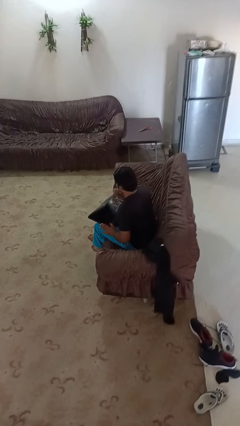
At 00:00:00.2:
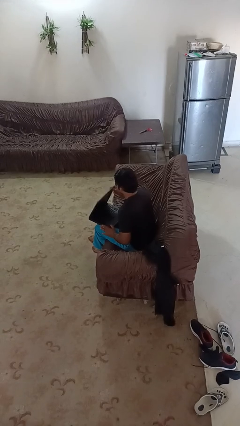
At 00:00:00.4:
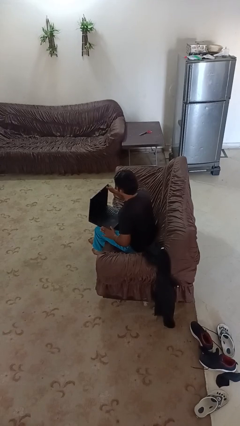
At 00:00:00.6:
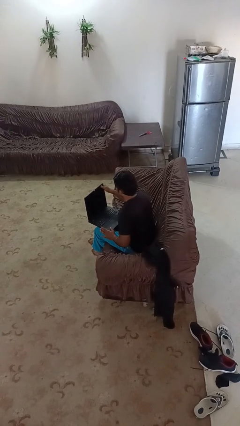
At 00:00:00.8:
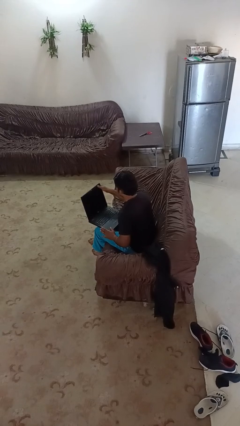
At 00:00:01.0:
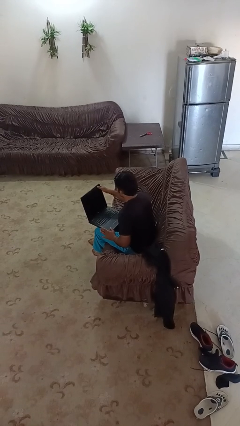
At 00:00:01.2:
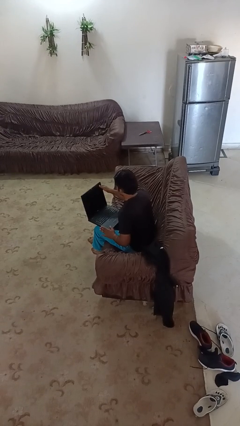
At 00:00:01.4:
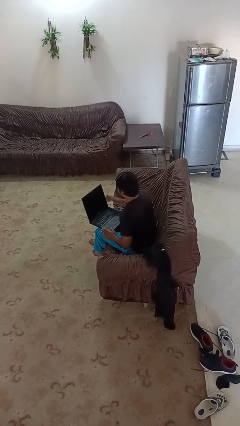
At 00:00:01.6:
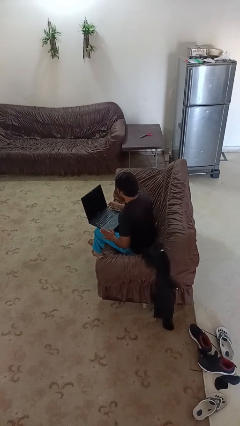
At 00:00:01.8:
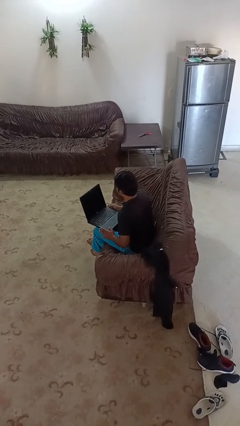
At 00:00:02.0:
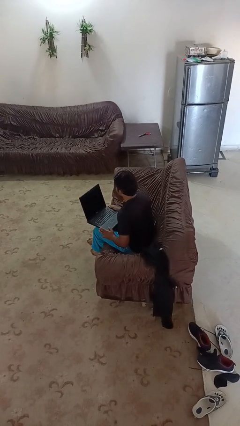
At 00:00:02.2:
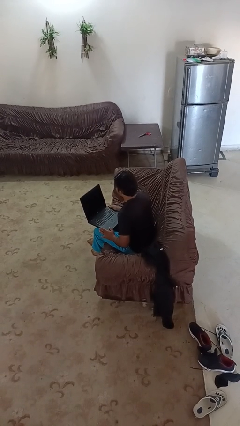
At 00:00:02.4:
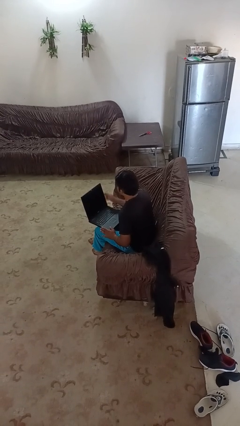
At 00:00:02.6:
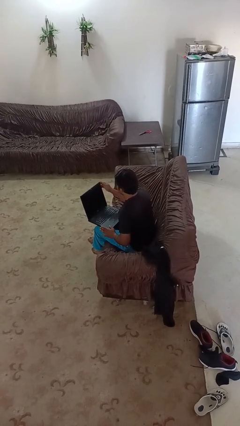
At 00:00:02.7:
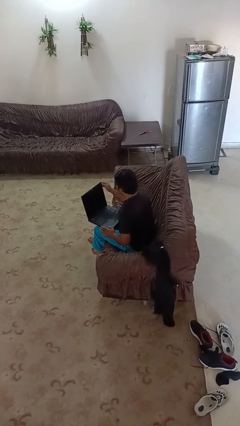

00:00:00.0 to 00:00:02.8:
person opens laptop

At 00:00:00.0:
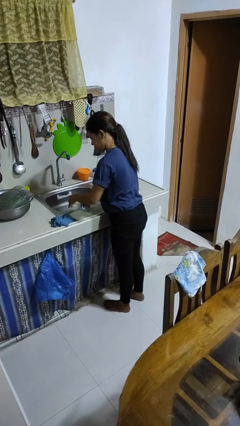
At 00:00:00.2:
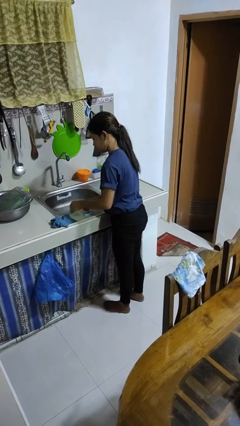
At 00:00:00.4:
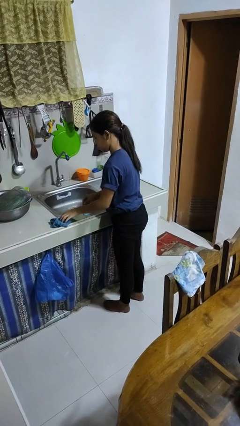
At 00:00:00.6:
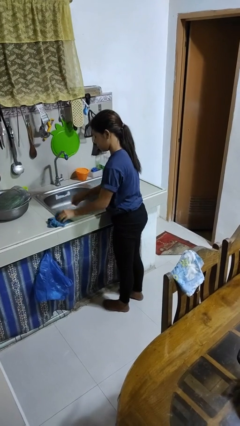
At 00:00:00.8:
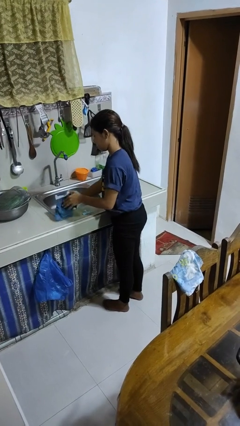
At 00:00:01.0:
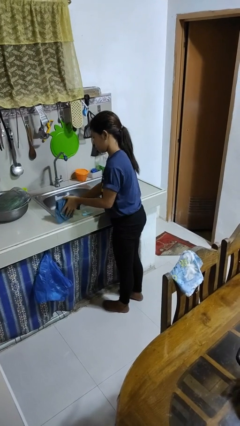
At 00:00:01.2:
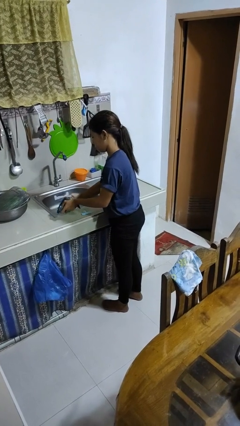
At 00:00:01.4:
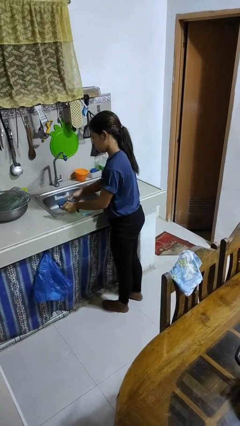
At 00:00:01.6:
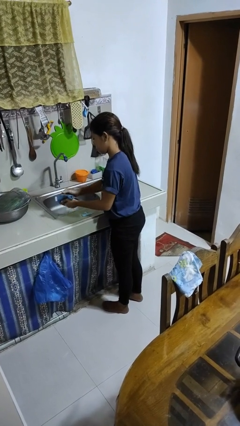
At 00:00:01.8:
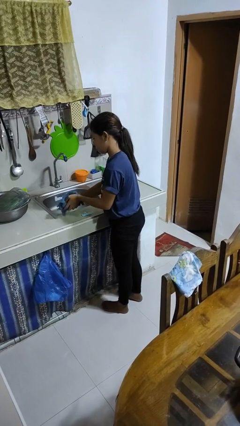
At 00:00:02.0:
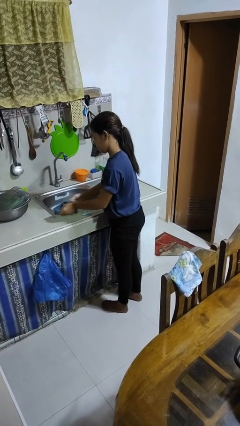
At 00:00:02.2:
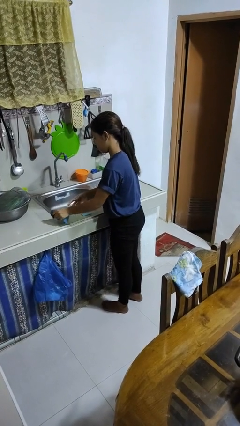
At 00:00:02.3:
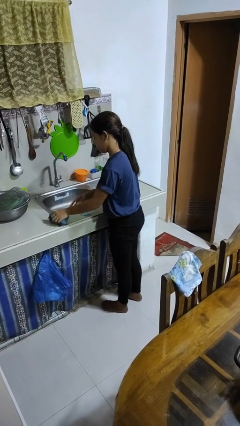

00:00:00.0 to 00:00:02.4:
person dries hands with towel

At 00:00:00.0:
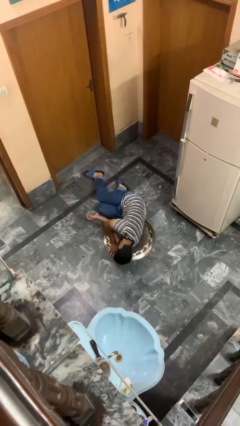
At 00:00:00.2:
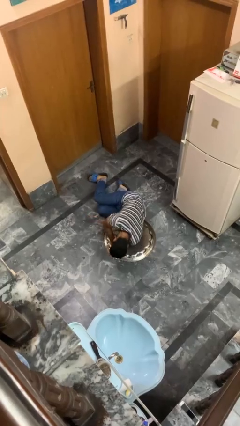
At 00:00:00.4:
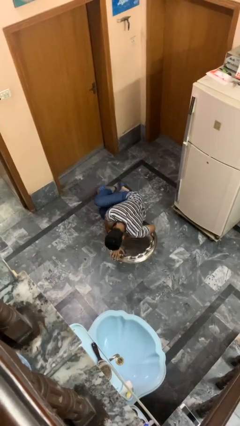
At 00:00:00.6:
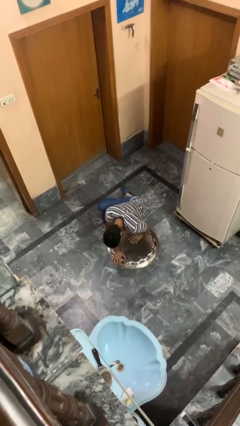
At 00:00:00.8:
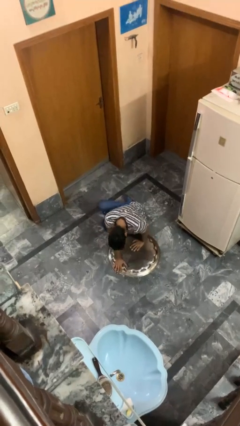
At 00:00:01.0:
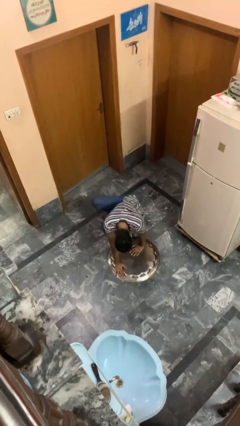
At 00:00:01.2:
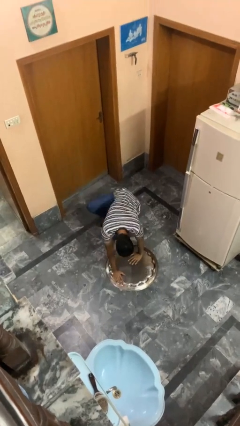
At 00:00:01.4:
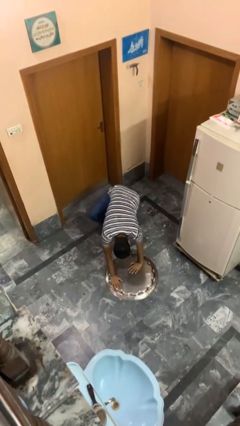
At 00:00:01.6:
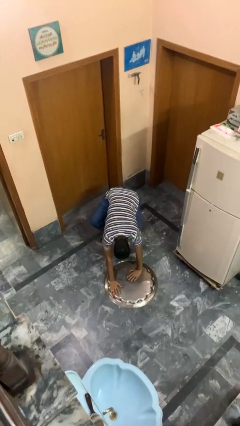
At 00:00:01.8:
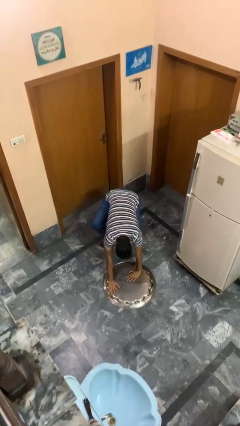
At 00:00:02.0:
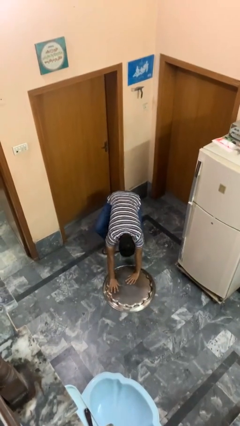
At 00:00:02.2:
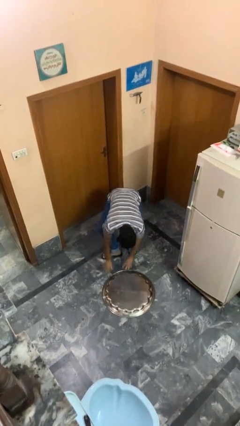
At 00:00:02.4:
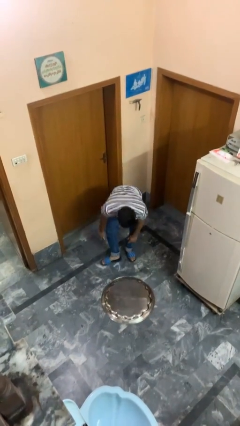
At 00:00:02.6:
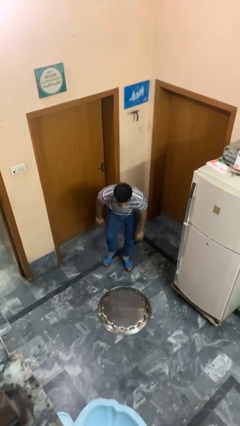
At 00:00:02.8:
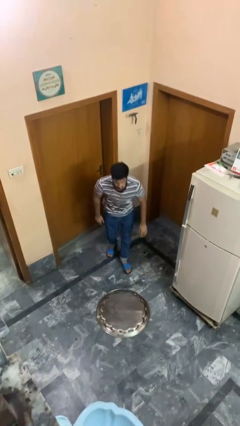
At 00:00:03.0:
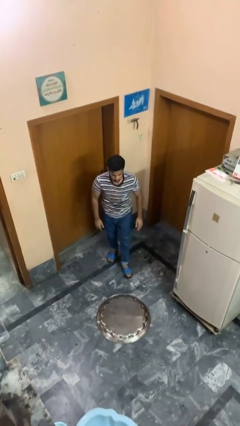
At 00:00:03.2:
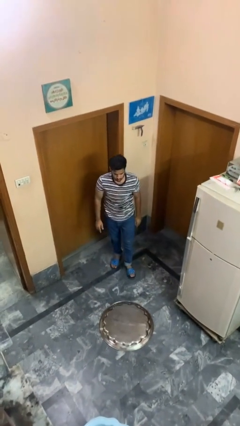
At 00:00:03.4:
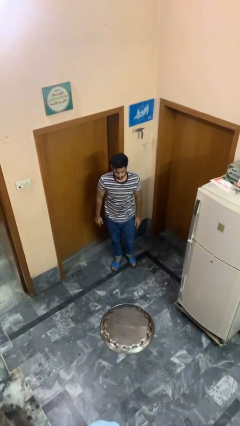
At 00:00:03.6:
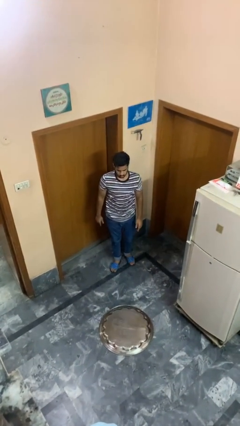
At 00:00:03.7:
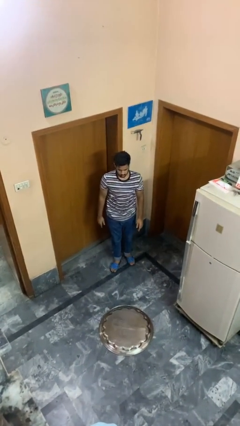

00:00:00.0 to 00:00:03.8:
person stands up from floor

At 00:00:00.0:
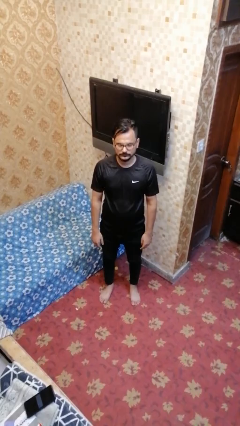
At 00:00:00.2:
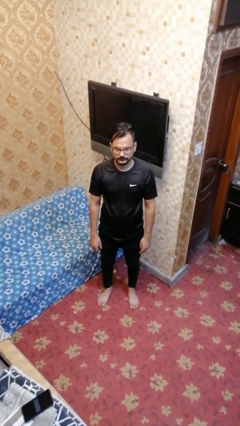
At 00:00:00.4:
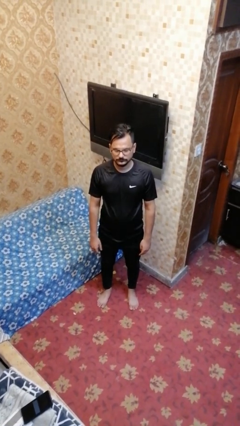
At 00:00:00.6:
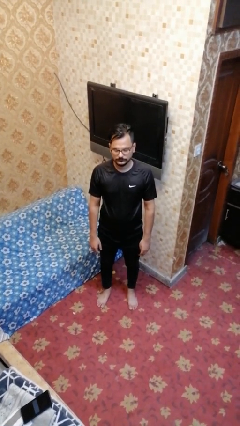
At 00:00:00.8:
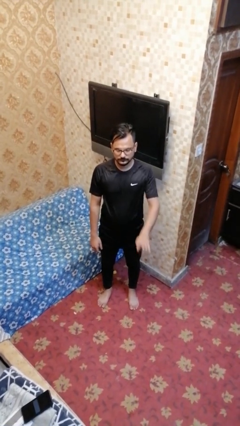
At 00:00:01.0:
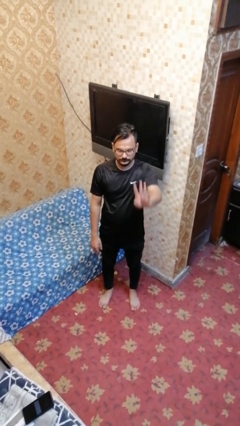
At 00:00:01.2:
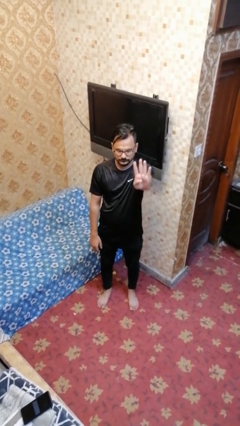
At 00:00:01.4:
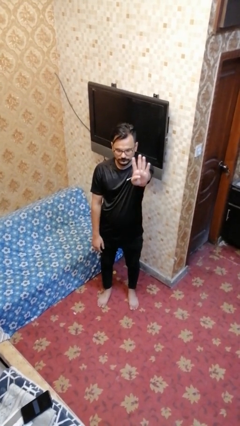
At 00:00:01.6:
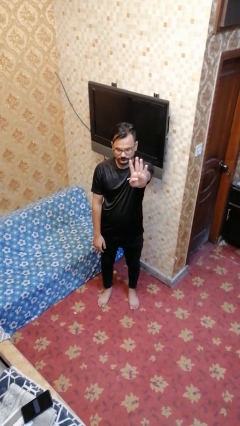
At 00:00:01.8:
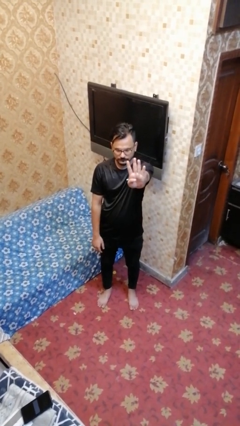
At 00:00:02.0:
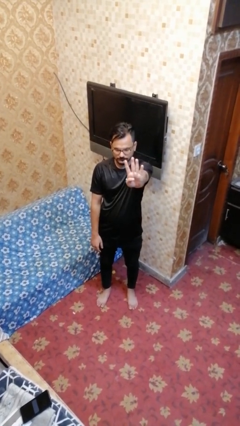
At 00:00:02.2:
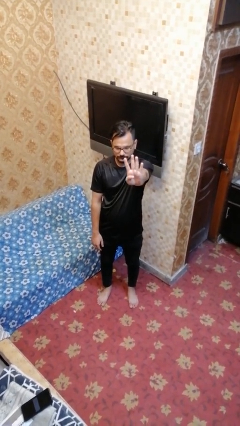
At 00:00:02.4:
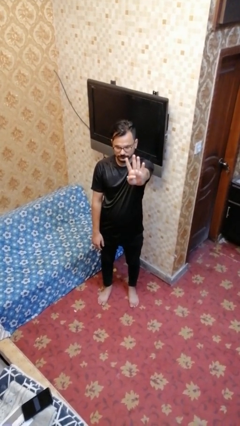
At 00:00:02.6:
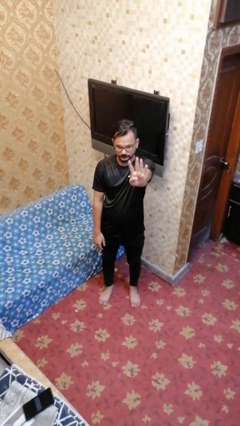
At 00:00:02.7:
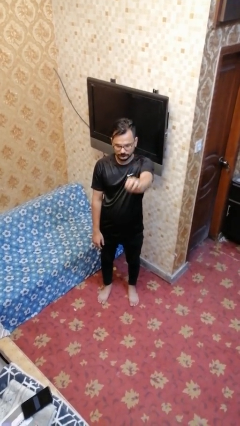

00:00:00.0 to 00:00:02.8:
person gestures number four

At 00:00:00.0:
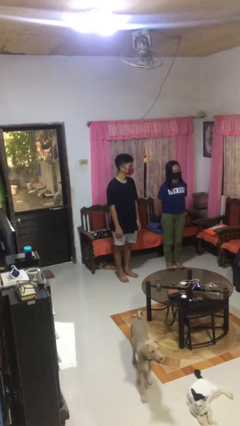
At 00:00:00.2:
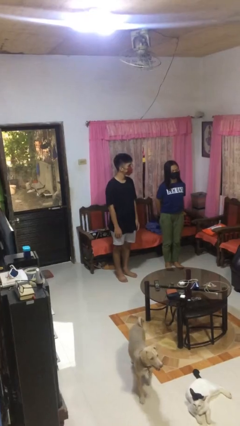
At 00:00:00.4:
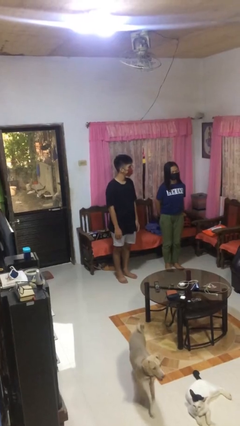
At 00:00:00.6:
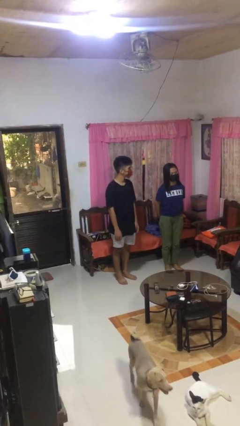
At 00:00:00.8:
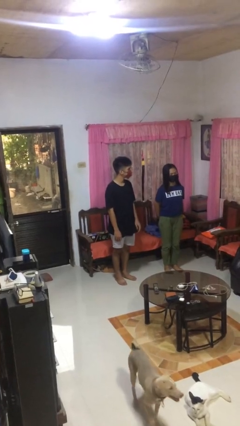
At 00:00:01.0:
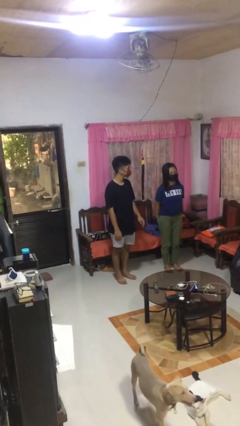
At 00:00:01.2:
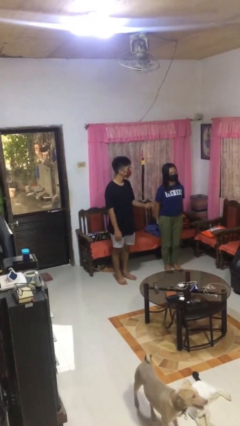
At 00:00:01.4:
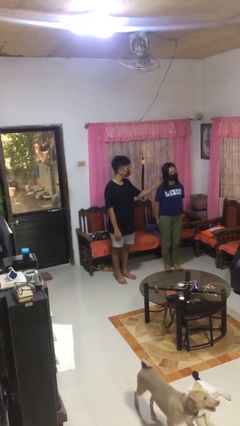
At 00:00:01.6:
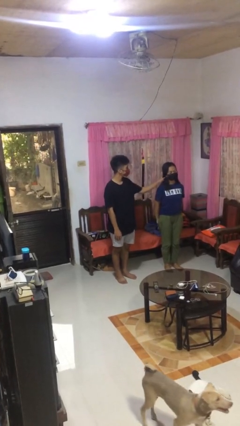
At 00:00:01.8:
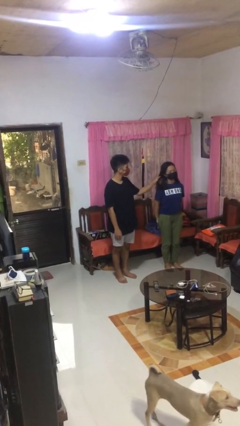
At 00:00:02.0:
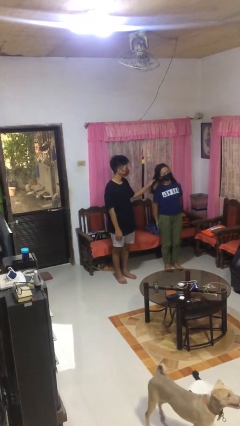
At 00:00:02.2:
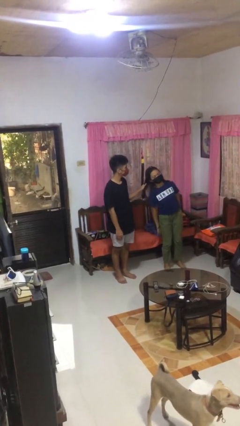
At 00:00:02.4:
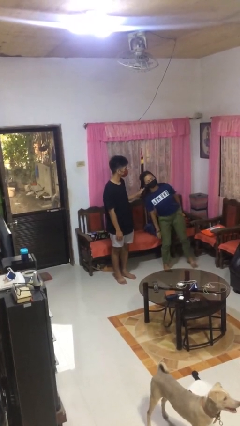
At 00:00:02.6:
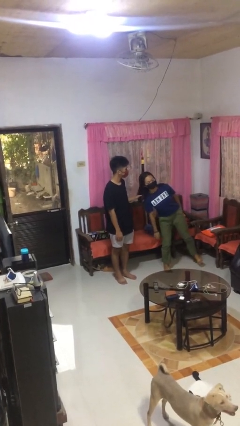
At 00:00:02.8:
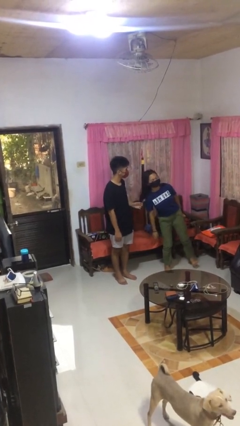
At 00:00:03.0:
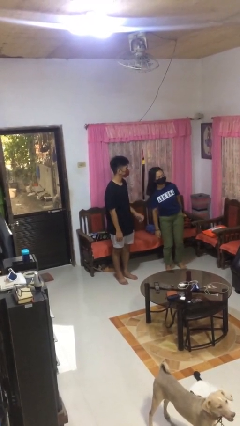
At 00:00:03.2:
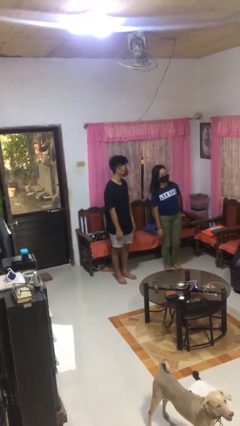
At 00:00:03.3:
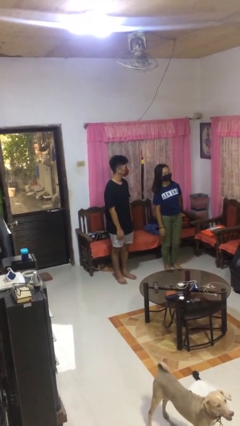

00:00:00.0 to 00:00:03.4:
person grabs person by hair

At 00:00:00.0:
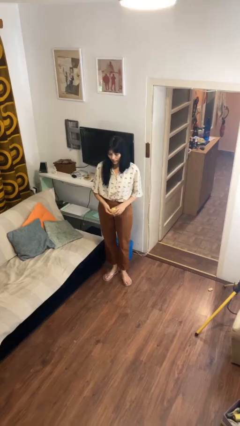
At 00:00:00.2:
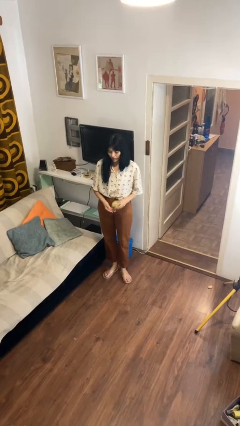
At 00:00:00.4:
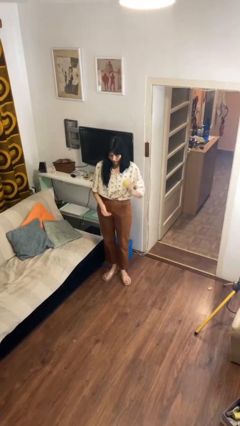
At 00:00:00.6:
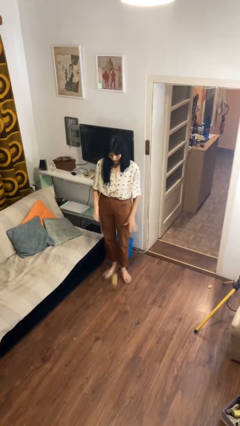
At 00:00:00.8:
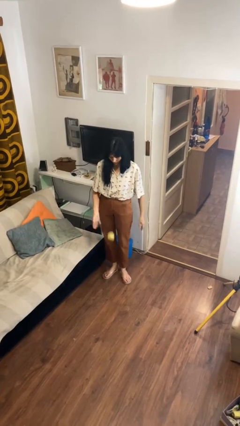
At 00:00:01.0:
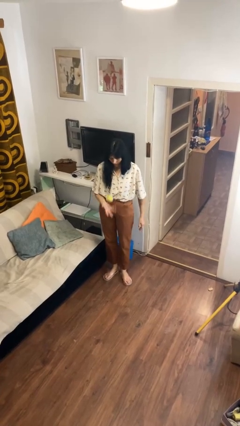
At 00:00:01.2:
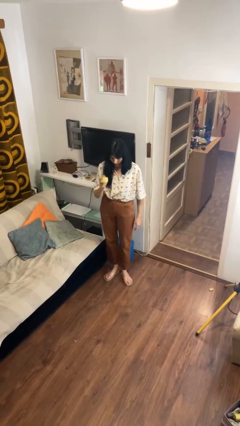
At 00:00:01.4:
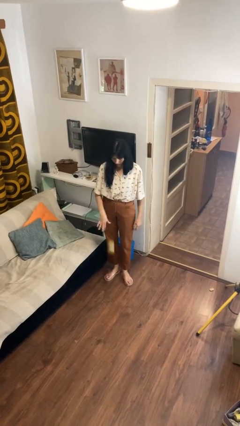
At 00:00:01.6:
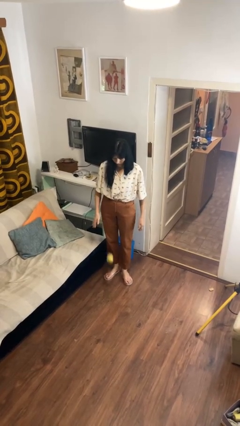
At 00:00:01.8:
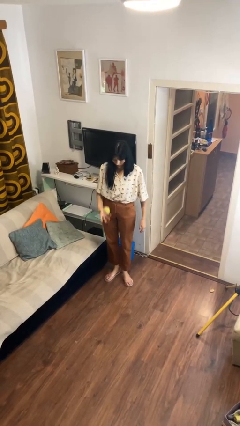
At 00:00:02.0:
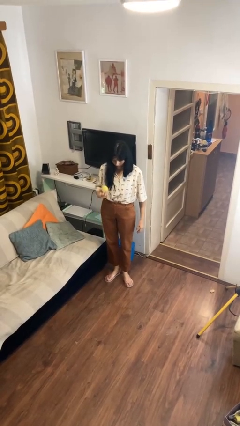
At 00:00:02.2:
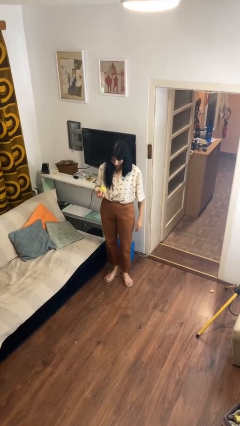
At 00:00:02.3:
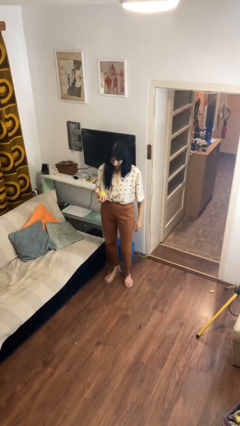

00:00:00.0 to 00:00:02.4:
person bounces ball on floor
